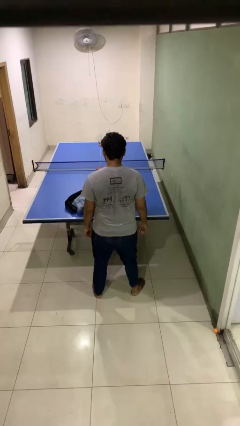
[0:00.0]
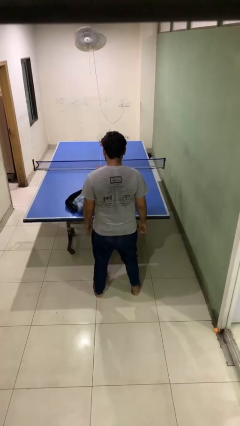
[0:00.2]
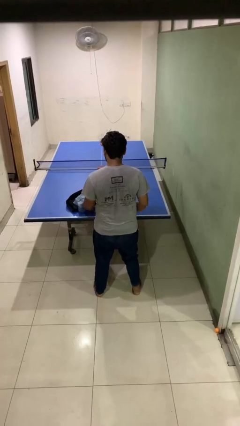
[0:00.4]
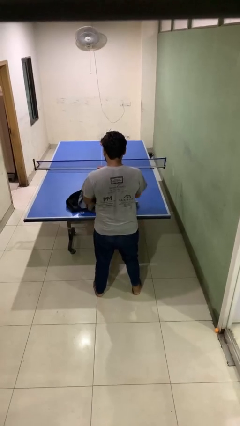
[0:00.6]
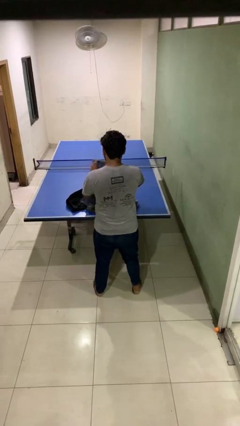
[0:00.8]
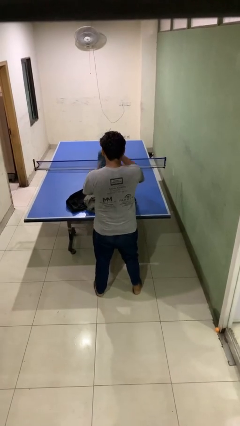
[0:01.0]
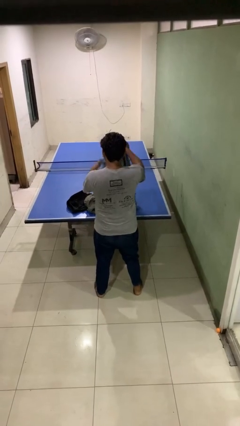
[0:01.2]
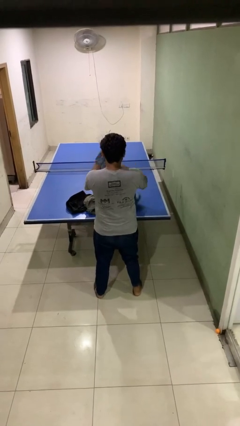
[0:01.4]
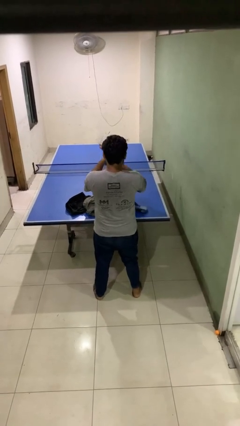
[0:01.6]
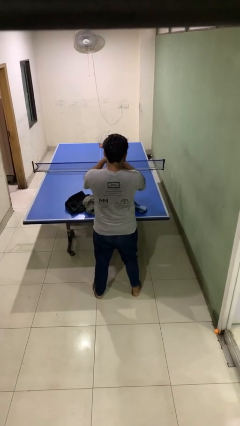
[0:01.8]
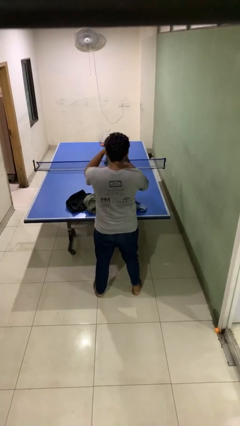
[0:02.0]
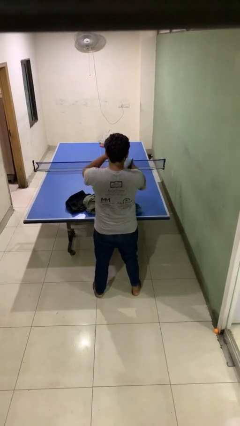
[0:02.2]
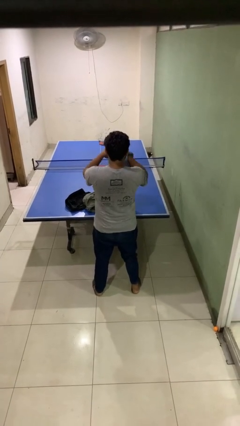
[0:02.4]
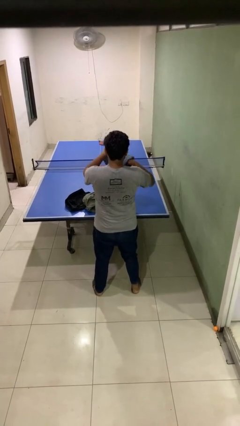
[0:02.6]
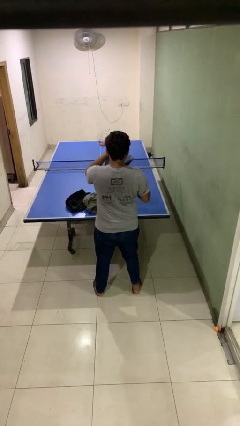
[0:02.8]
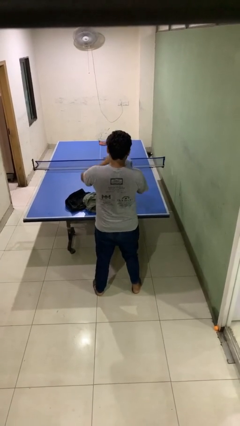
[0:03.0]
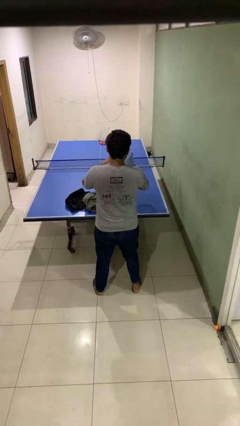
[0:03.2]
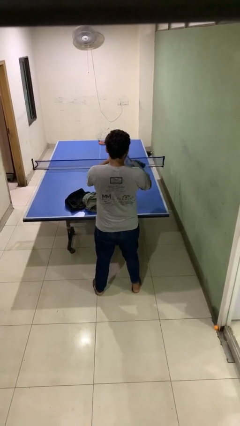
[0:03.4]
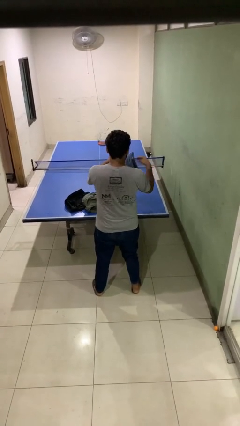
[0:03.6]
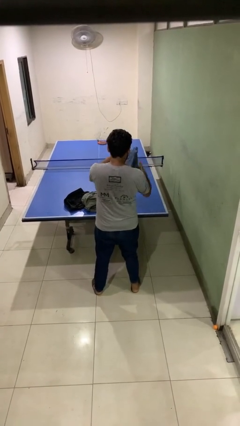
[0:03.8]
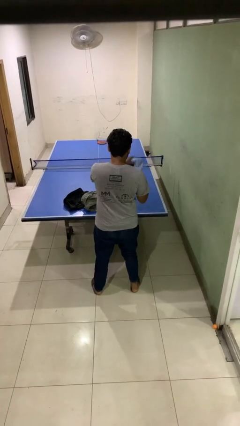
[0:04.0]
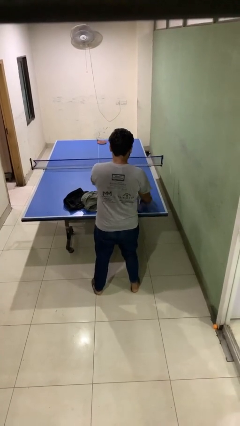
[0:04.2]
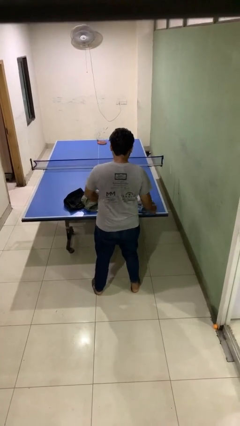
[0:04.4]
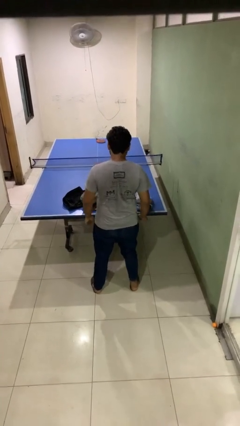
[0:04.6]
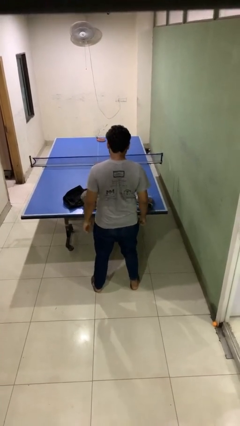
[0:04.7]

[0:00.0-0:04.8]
person folds pants

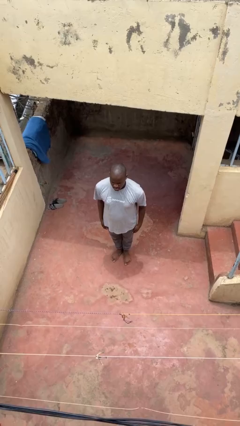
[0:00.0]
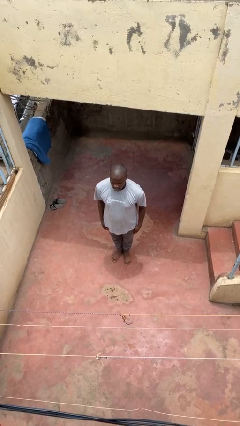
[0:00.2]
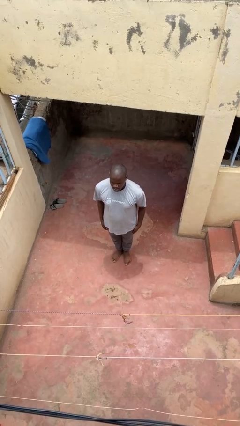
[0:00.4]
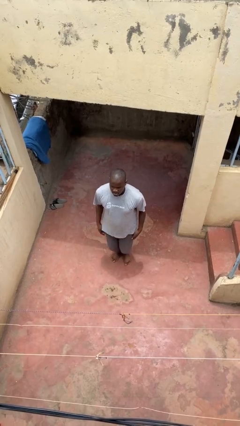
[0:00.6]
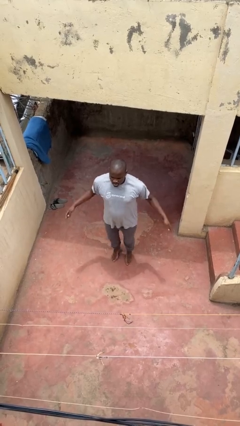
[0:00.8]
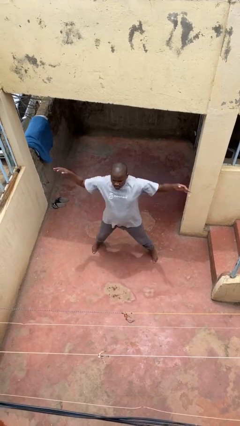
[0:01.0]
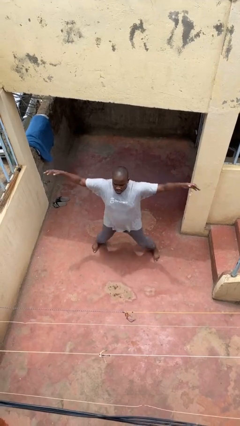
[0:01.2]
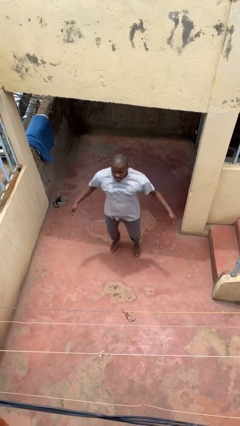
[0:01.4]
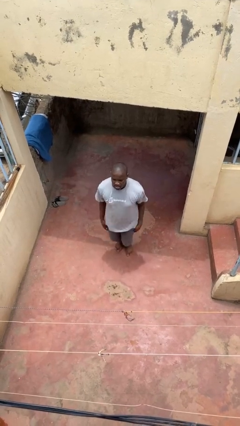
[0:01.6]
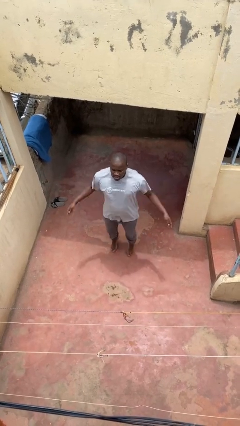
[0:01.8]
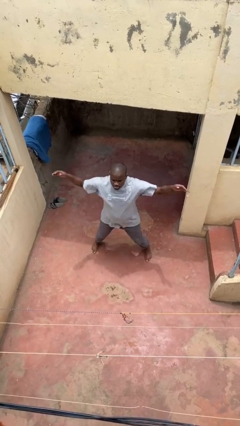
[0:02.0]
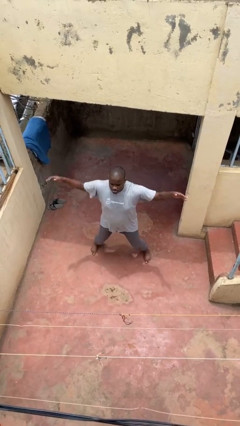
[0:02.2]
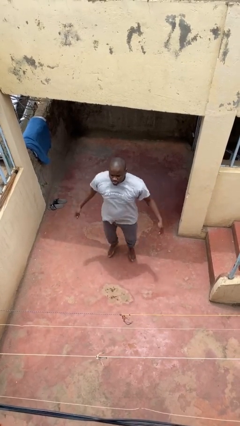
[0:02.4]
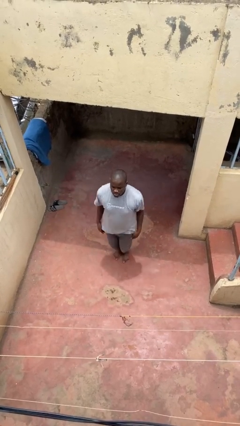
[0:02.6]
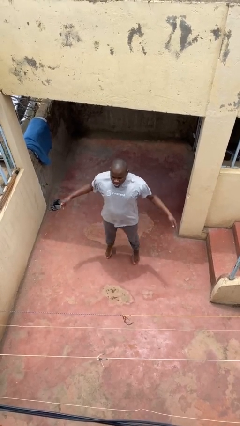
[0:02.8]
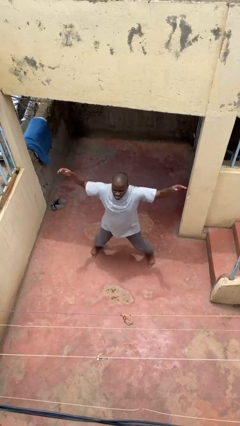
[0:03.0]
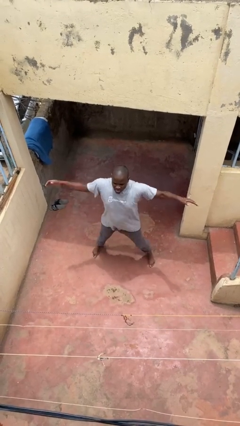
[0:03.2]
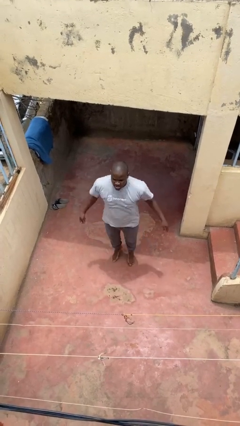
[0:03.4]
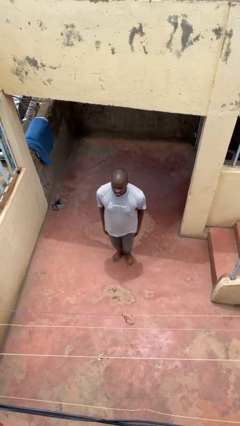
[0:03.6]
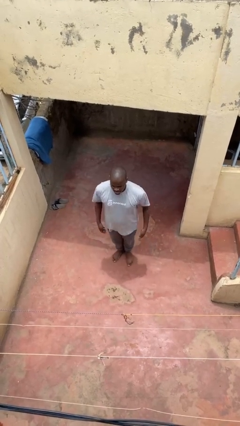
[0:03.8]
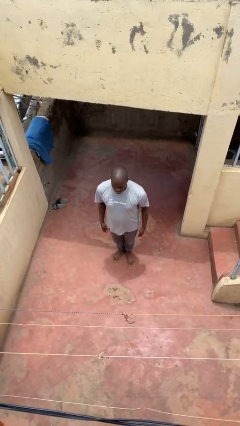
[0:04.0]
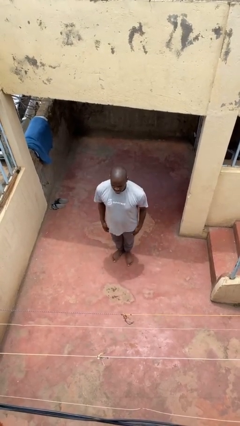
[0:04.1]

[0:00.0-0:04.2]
person exercises with jumping jacks

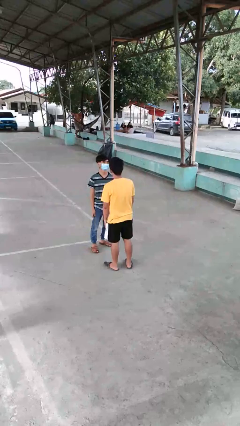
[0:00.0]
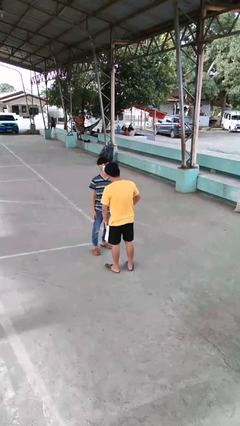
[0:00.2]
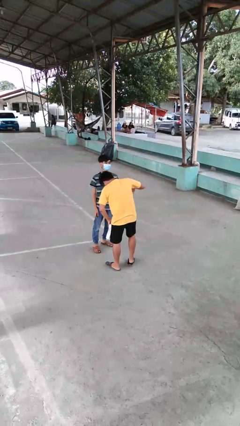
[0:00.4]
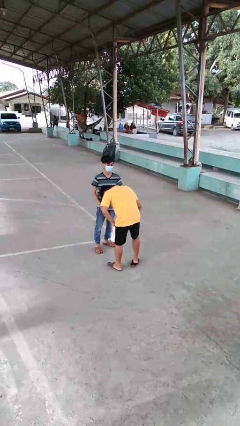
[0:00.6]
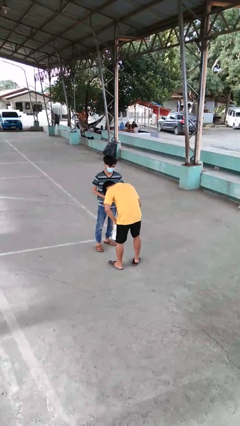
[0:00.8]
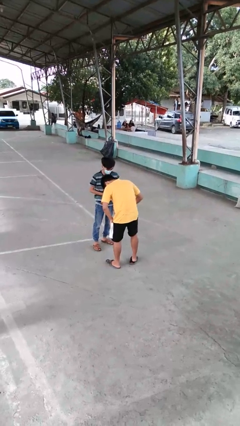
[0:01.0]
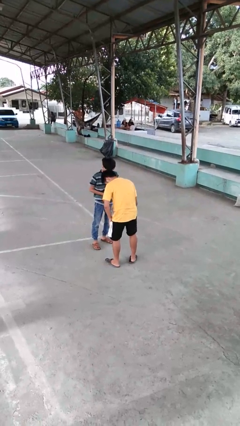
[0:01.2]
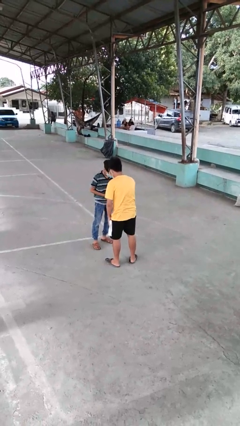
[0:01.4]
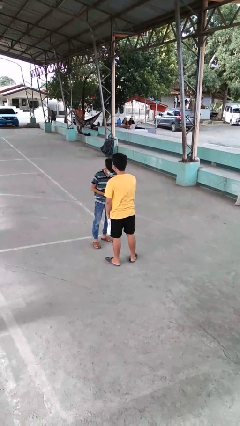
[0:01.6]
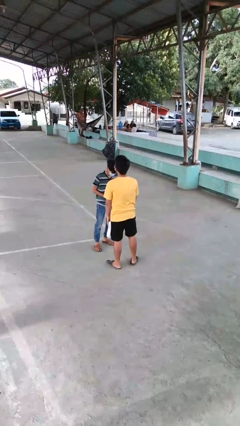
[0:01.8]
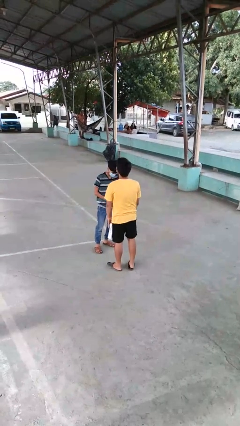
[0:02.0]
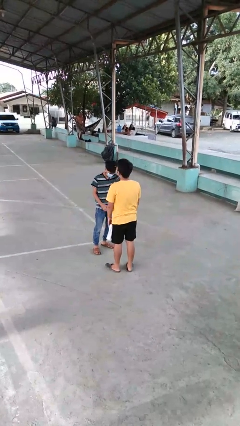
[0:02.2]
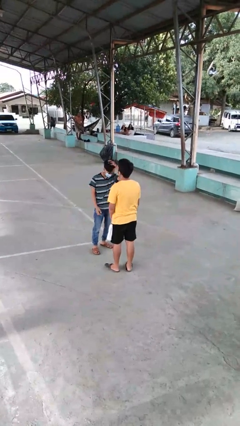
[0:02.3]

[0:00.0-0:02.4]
person laughs with person

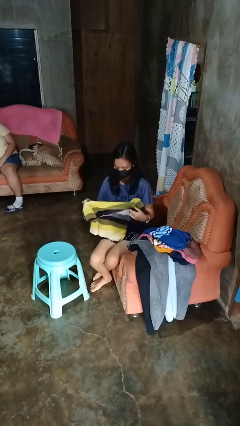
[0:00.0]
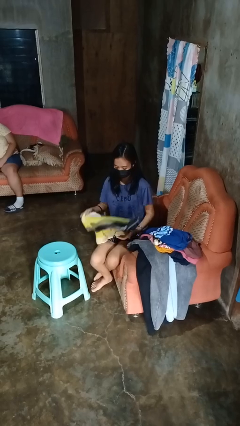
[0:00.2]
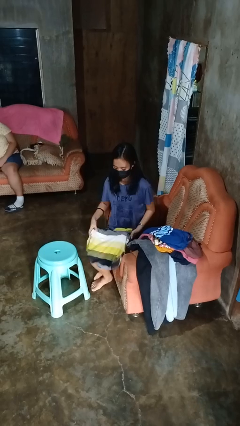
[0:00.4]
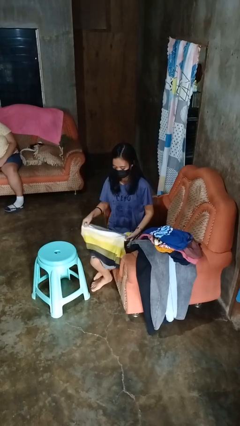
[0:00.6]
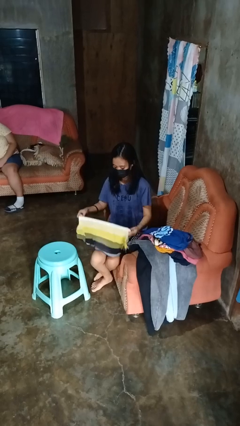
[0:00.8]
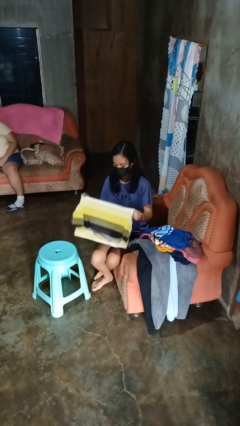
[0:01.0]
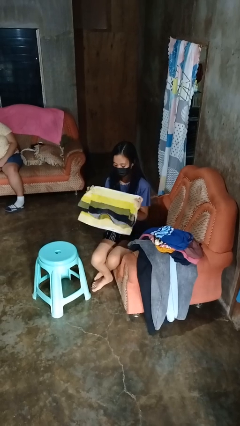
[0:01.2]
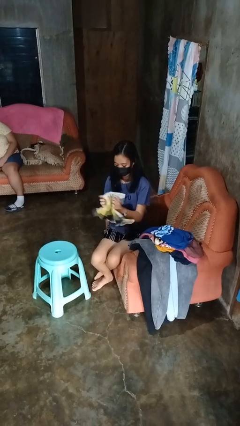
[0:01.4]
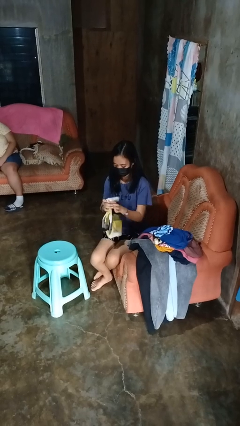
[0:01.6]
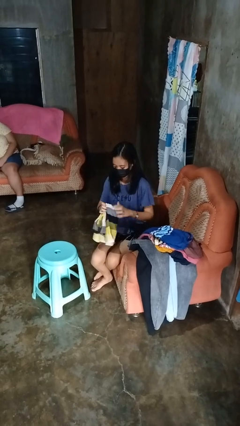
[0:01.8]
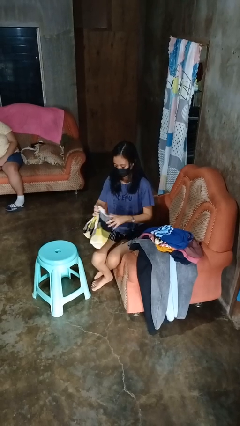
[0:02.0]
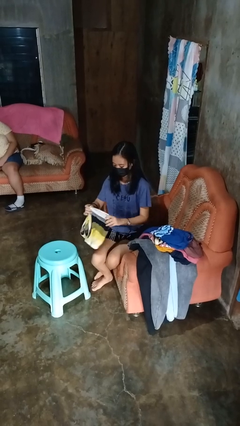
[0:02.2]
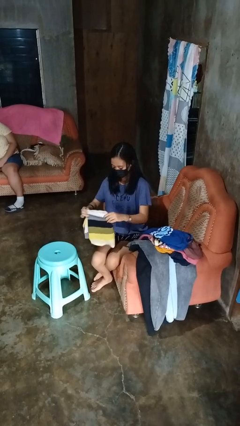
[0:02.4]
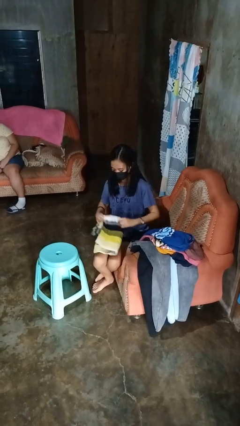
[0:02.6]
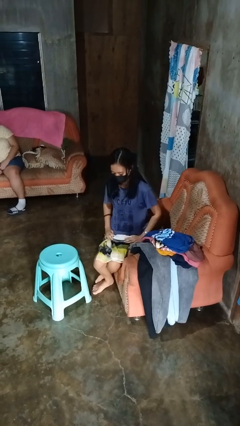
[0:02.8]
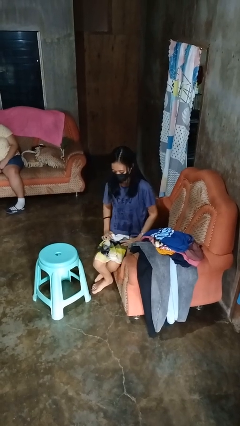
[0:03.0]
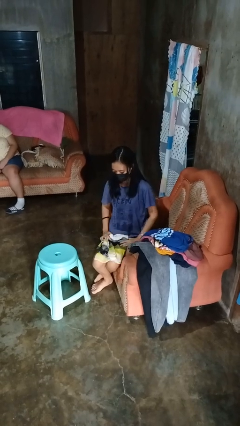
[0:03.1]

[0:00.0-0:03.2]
person folds shirt

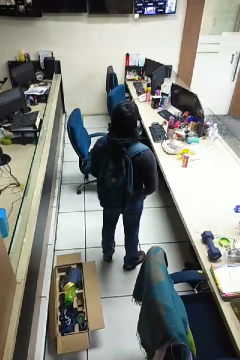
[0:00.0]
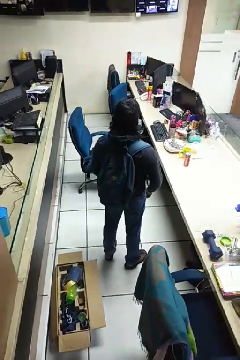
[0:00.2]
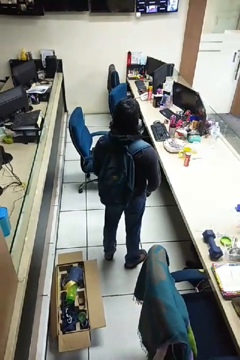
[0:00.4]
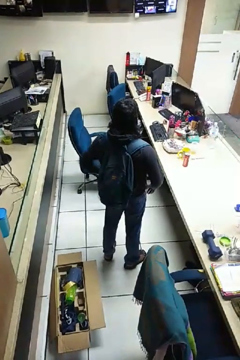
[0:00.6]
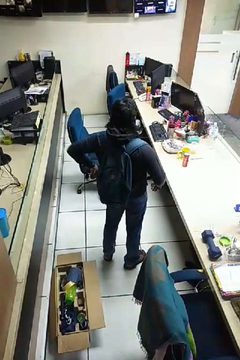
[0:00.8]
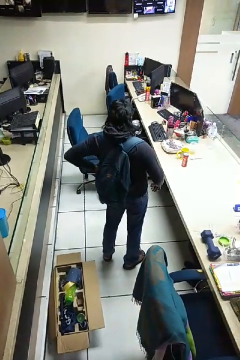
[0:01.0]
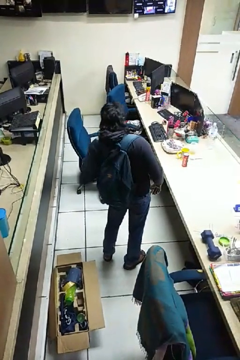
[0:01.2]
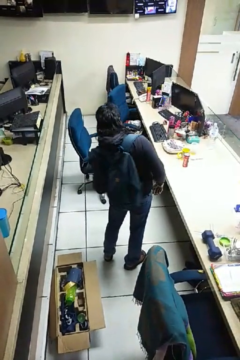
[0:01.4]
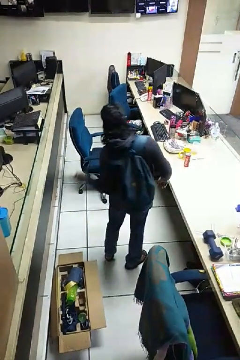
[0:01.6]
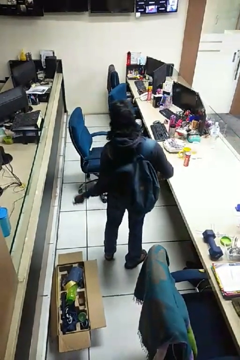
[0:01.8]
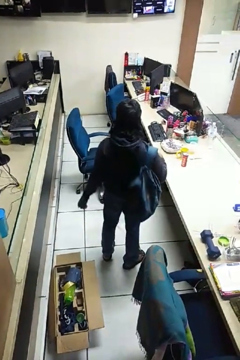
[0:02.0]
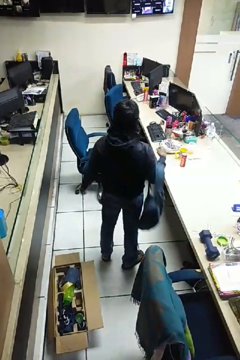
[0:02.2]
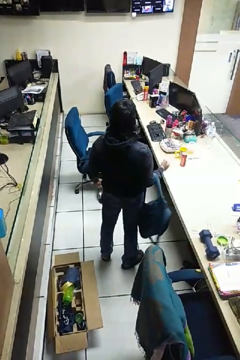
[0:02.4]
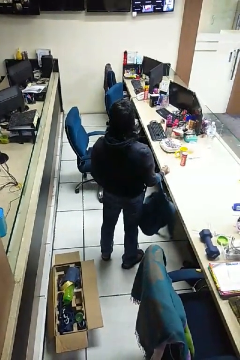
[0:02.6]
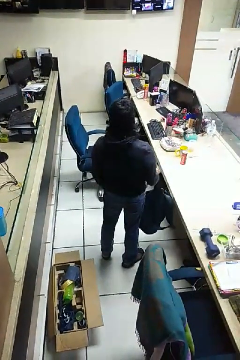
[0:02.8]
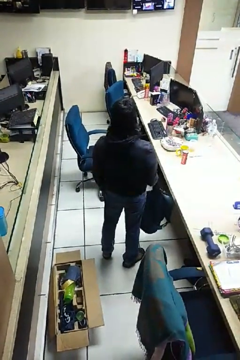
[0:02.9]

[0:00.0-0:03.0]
person takes off backpack

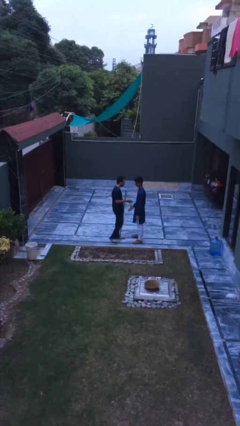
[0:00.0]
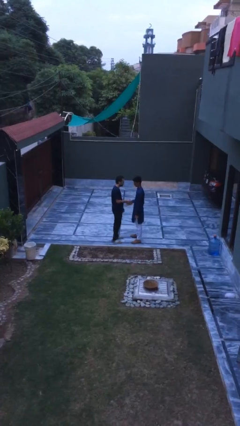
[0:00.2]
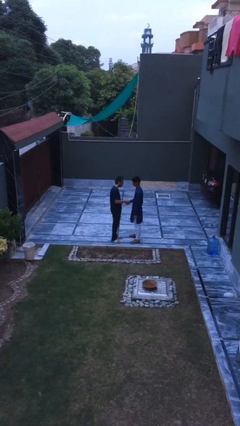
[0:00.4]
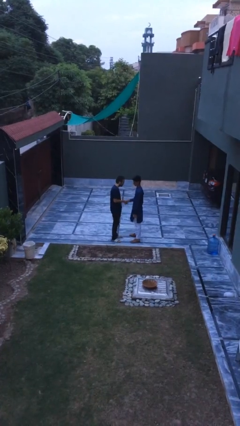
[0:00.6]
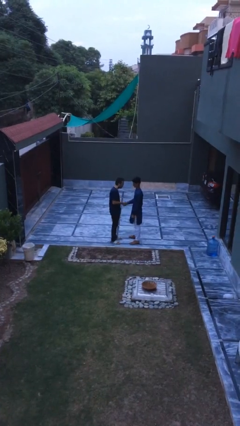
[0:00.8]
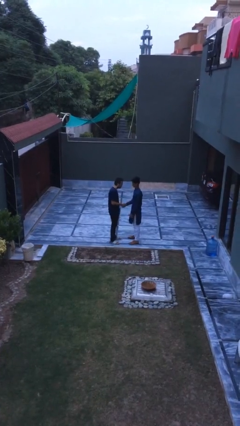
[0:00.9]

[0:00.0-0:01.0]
person shakes hand
